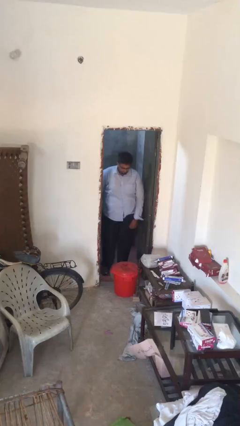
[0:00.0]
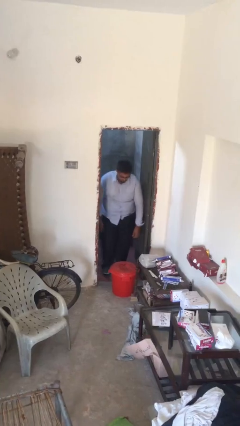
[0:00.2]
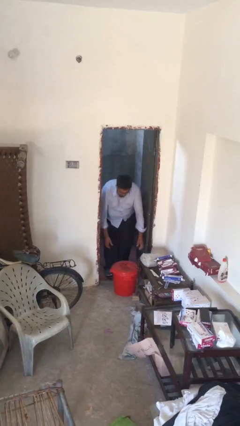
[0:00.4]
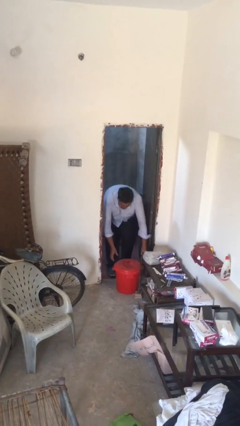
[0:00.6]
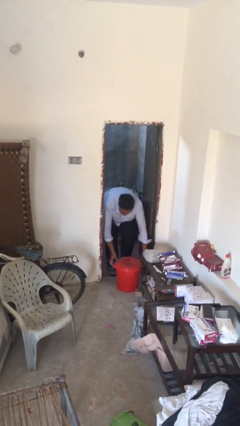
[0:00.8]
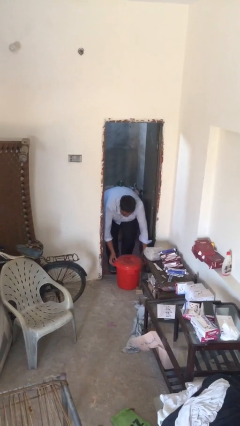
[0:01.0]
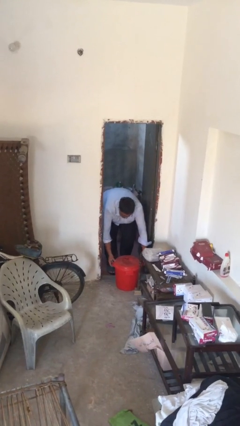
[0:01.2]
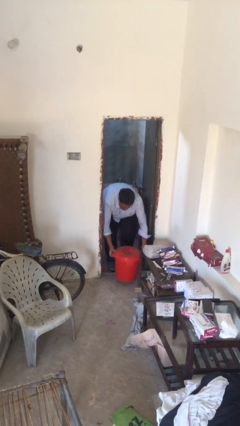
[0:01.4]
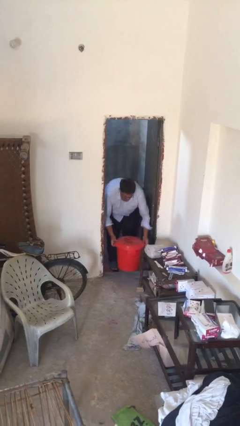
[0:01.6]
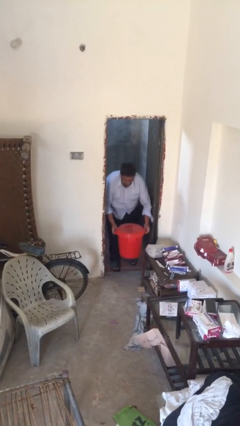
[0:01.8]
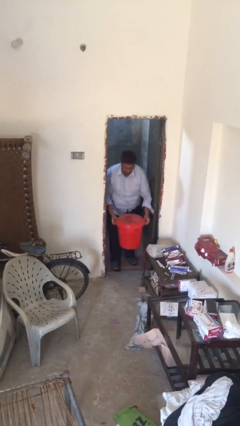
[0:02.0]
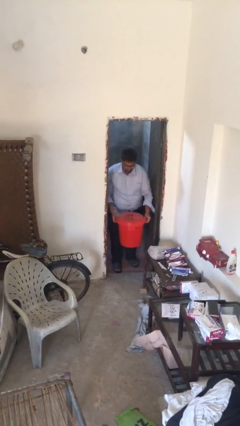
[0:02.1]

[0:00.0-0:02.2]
person picks up object from floor

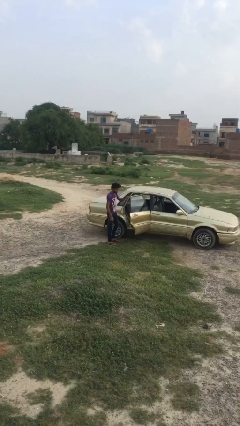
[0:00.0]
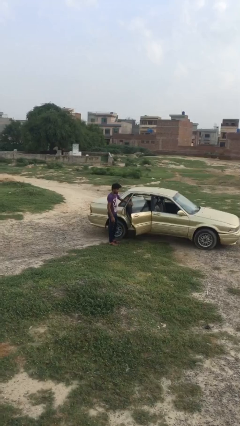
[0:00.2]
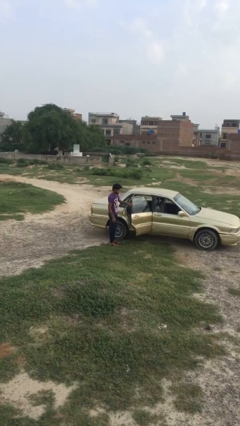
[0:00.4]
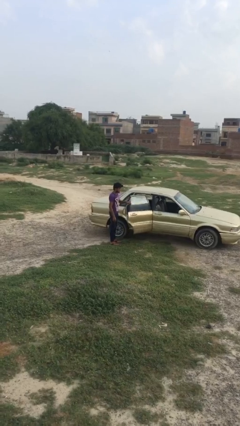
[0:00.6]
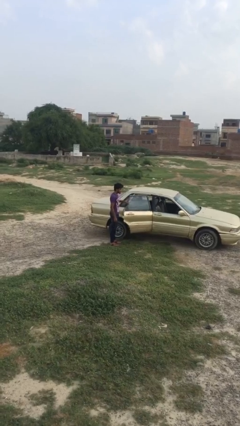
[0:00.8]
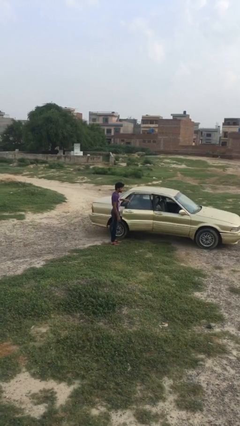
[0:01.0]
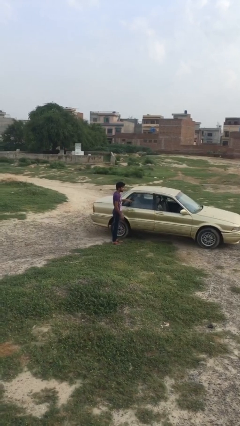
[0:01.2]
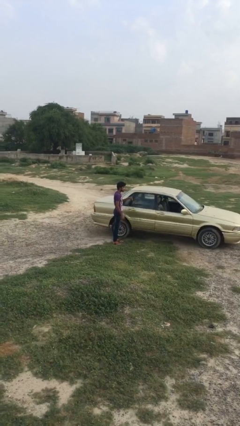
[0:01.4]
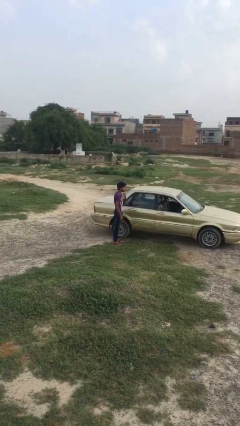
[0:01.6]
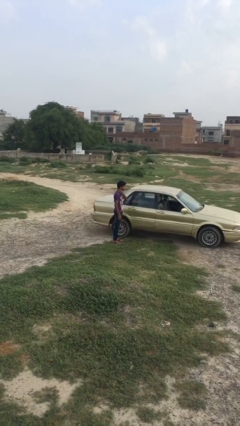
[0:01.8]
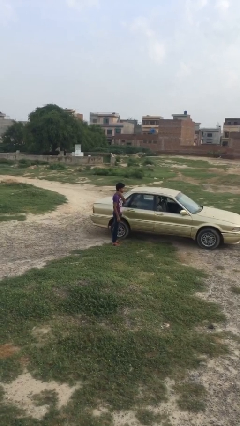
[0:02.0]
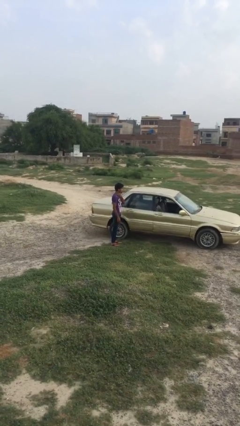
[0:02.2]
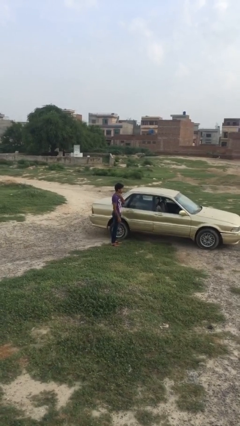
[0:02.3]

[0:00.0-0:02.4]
person closes car door

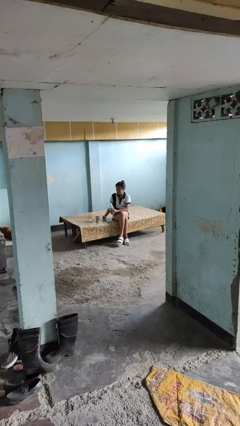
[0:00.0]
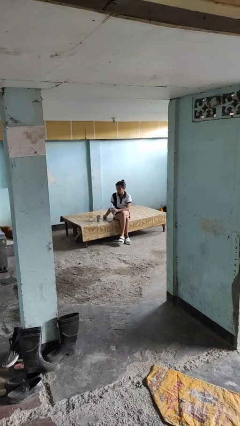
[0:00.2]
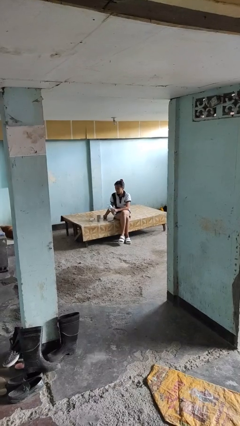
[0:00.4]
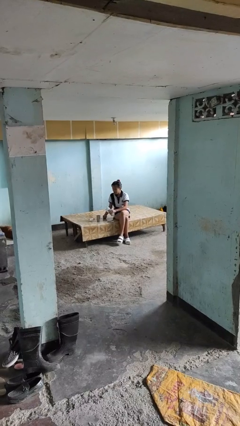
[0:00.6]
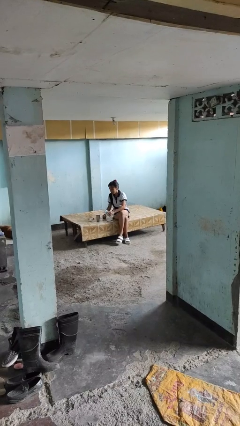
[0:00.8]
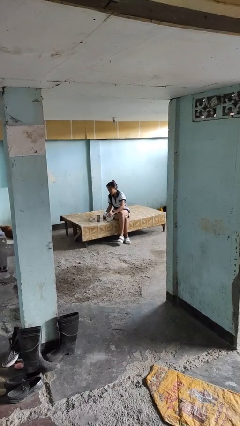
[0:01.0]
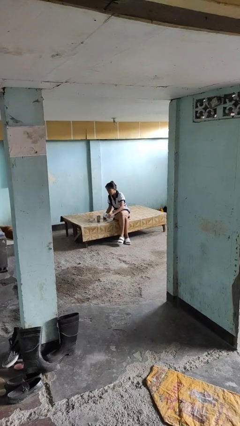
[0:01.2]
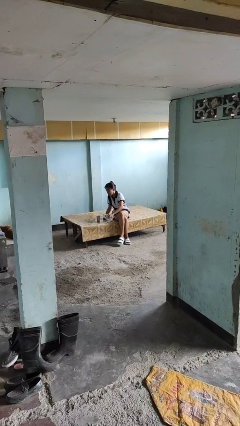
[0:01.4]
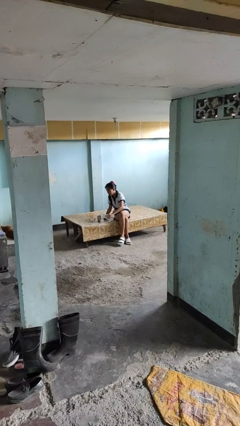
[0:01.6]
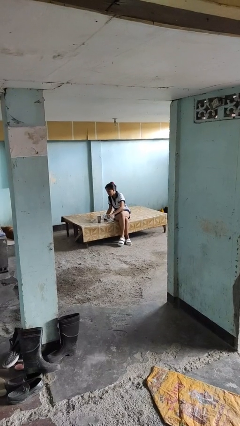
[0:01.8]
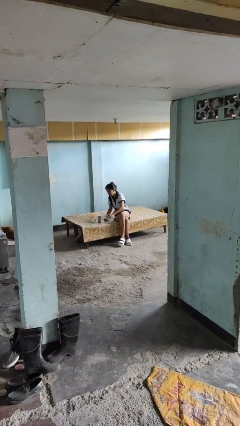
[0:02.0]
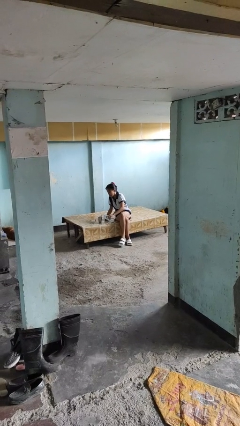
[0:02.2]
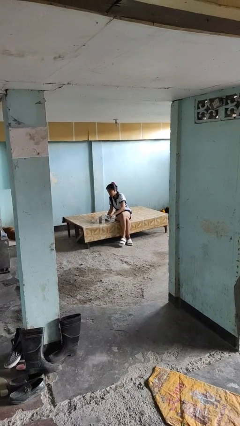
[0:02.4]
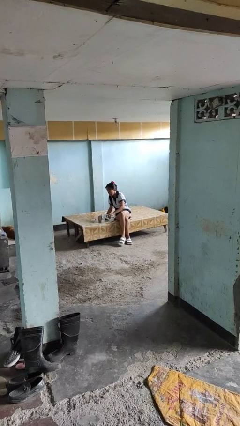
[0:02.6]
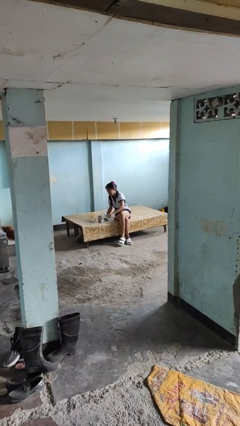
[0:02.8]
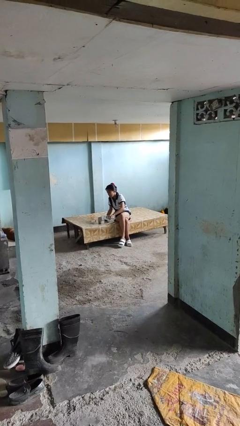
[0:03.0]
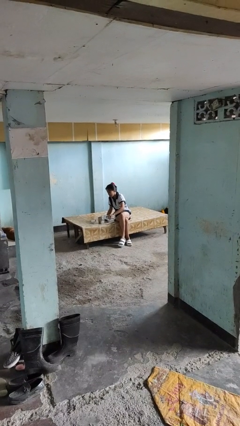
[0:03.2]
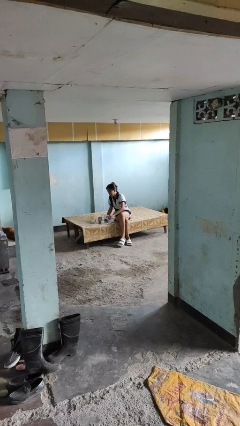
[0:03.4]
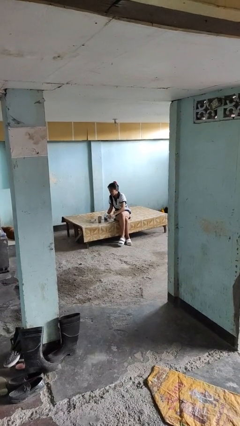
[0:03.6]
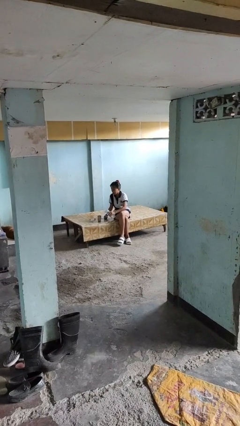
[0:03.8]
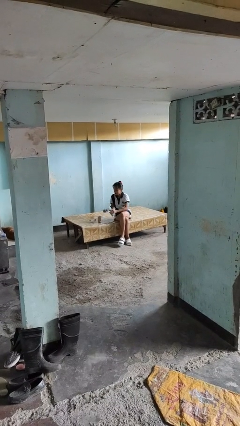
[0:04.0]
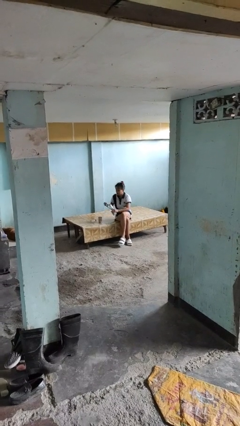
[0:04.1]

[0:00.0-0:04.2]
person pours liquid into cup

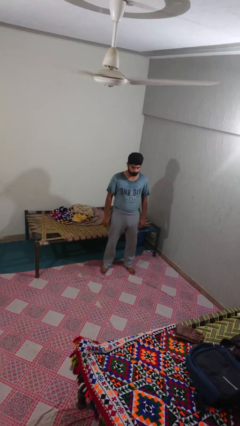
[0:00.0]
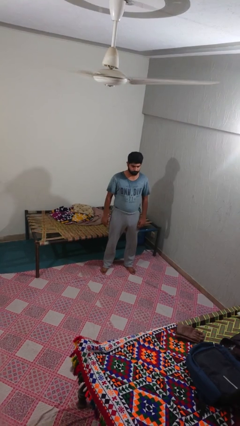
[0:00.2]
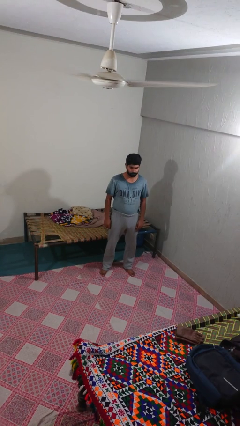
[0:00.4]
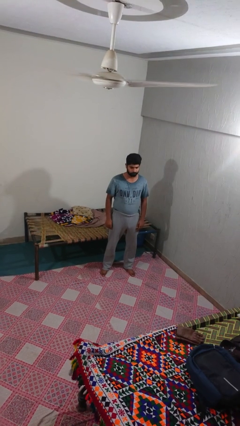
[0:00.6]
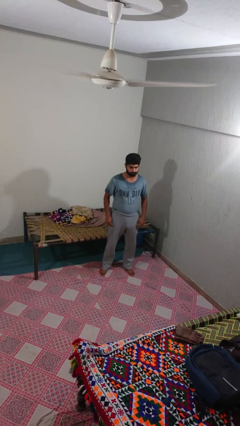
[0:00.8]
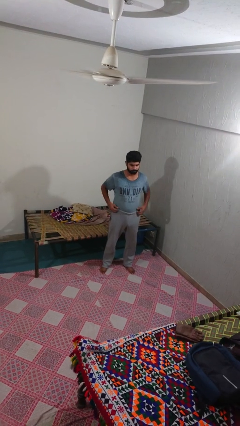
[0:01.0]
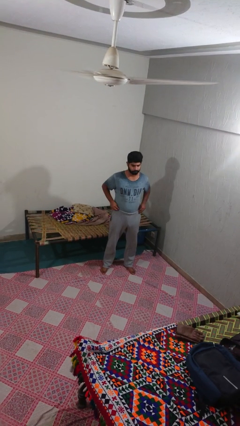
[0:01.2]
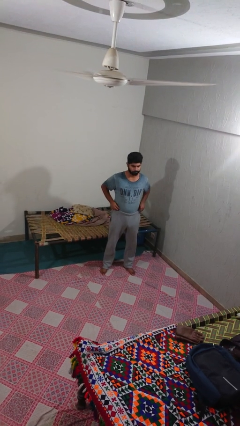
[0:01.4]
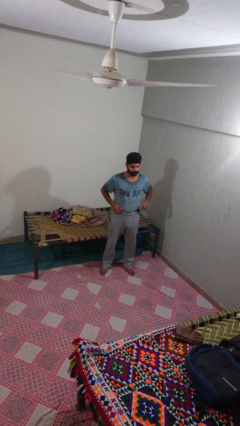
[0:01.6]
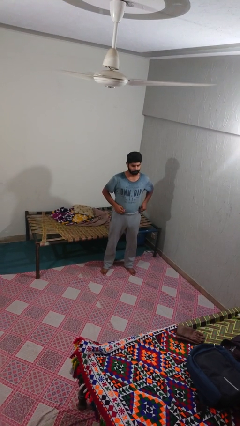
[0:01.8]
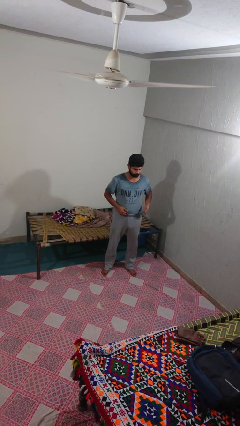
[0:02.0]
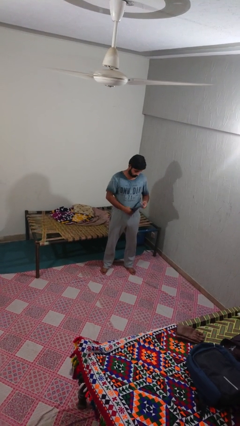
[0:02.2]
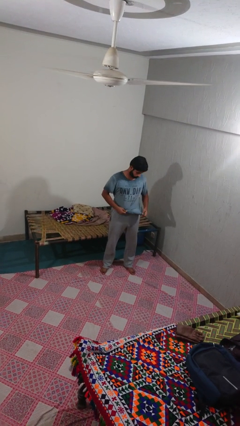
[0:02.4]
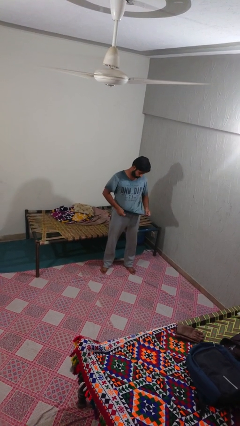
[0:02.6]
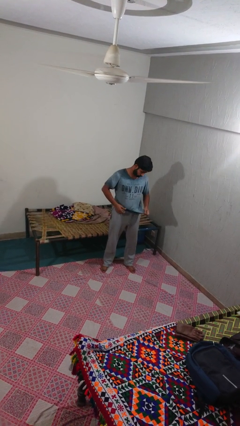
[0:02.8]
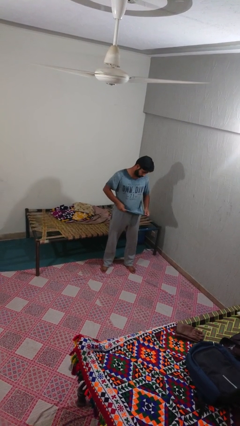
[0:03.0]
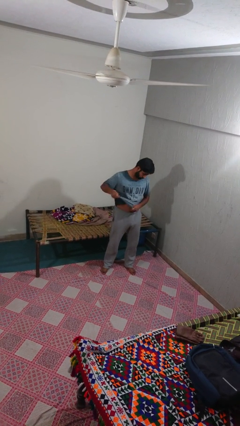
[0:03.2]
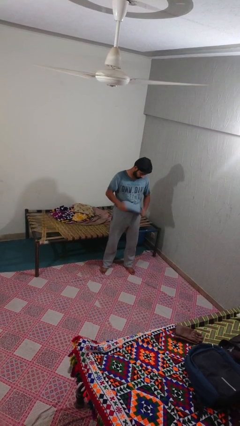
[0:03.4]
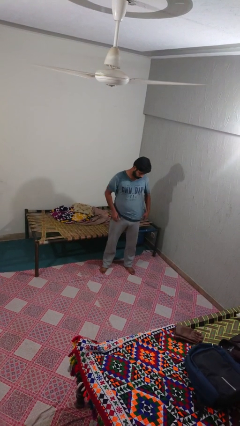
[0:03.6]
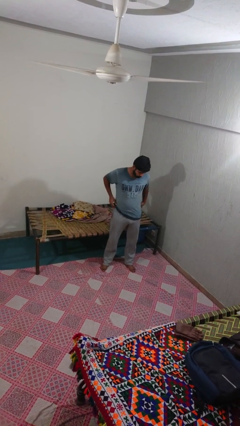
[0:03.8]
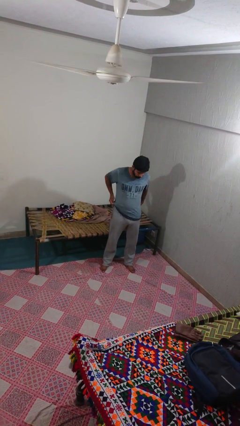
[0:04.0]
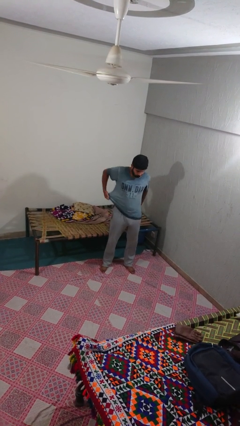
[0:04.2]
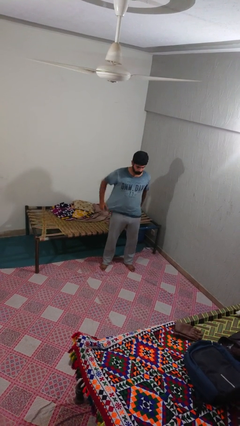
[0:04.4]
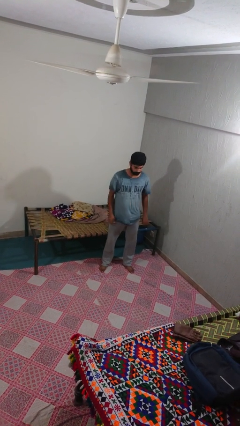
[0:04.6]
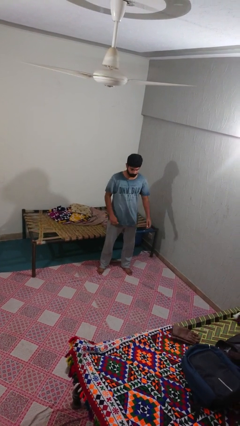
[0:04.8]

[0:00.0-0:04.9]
person untucks shirt

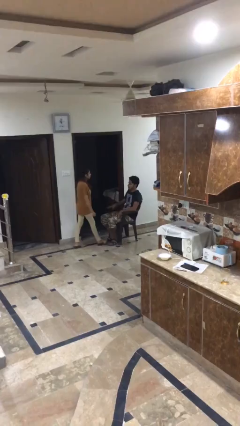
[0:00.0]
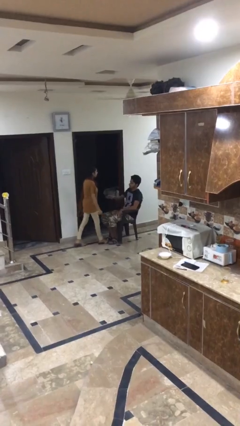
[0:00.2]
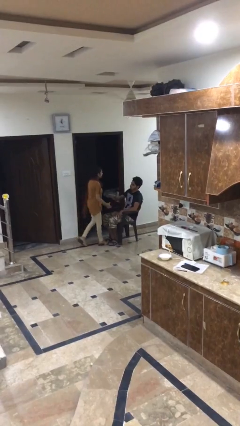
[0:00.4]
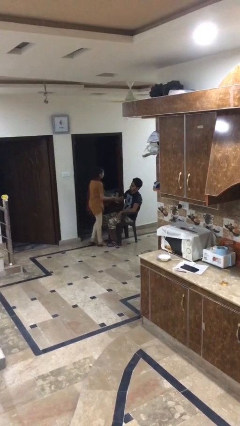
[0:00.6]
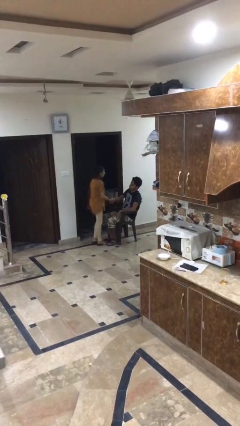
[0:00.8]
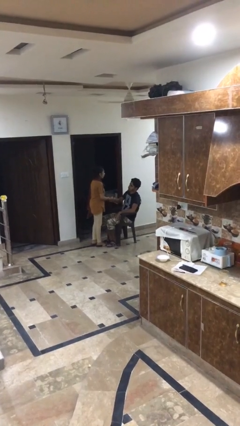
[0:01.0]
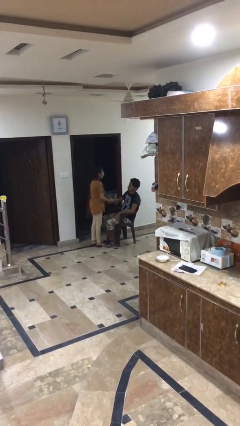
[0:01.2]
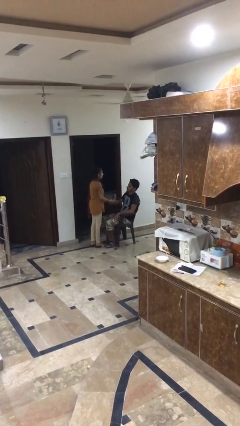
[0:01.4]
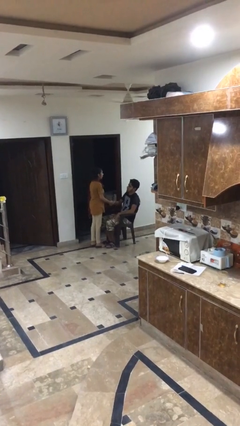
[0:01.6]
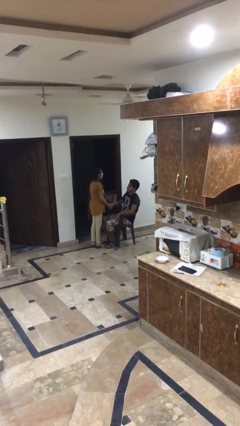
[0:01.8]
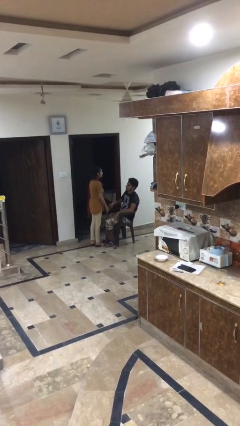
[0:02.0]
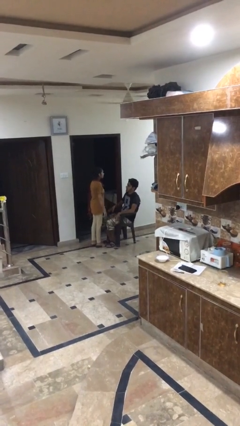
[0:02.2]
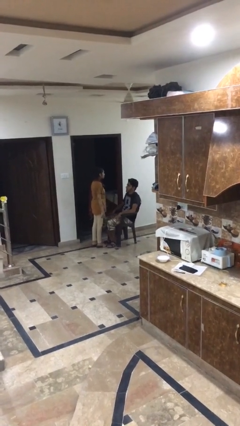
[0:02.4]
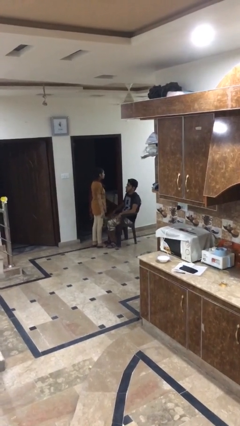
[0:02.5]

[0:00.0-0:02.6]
person shakes hand

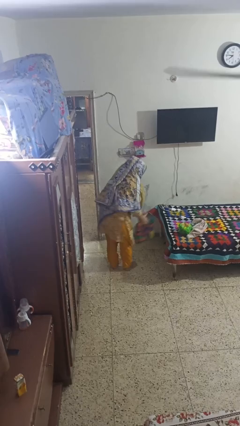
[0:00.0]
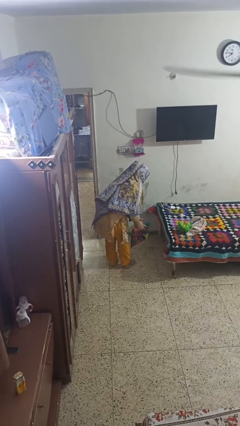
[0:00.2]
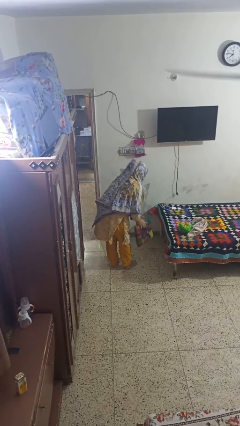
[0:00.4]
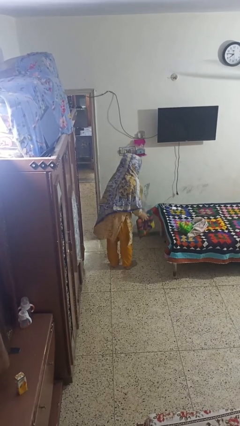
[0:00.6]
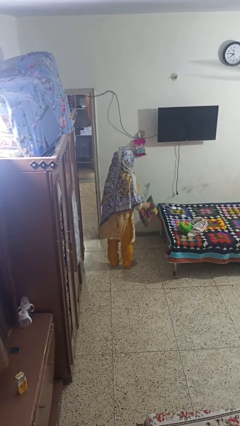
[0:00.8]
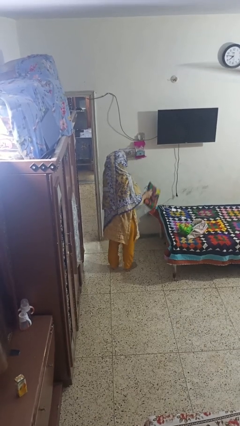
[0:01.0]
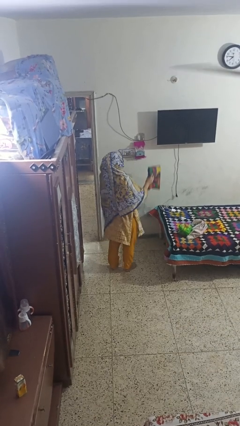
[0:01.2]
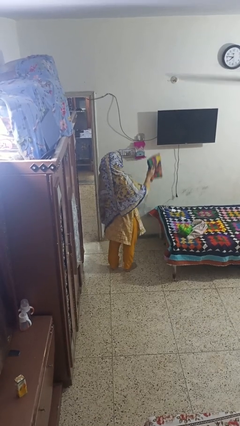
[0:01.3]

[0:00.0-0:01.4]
person catches dropped object
